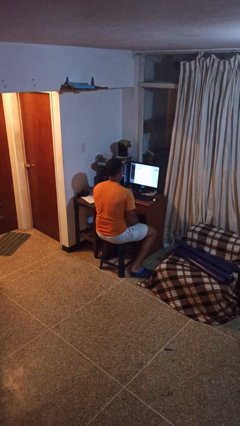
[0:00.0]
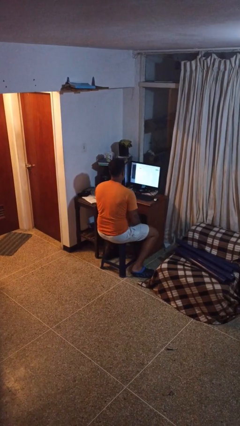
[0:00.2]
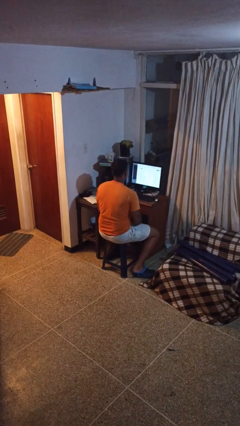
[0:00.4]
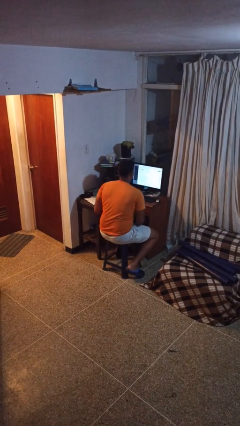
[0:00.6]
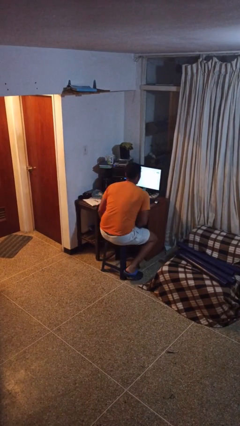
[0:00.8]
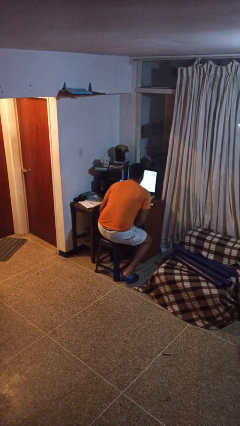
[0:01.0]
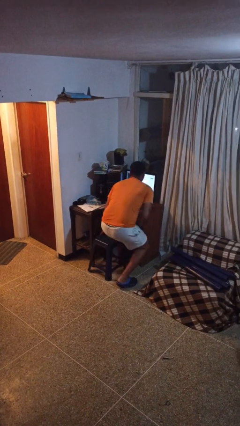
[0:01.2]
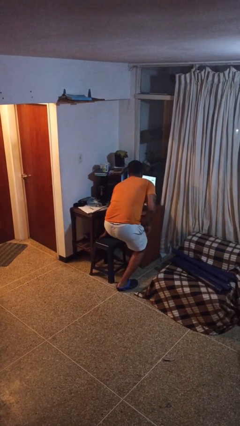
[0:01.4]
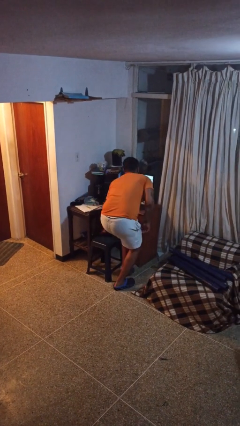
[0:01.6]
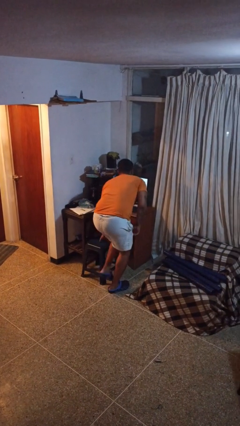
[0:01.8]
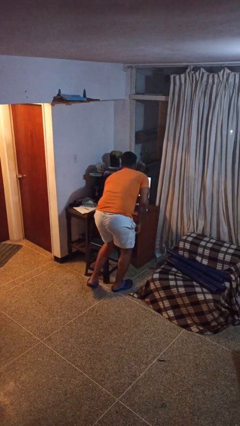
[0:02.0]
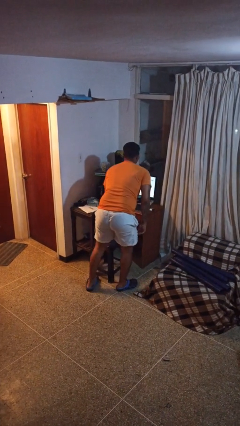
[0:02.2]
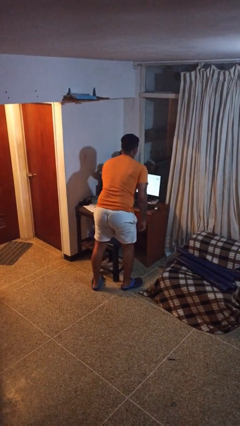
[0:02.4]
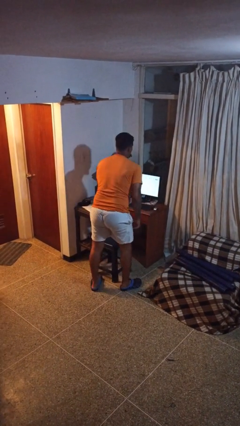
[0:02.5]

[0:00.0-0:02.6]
person stands up

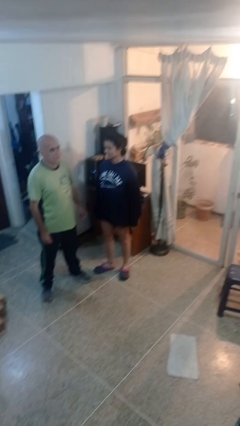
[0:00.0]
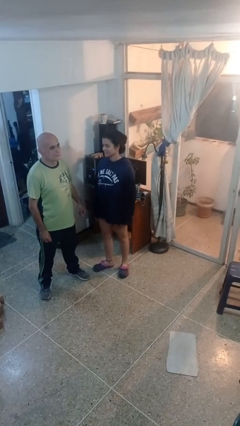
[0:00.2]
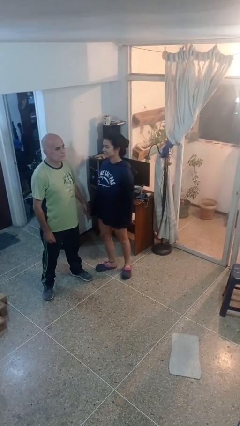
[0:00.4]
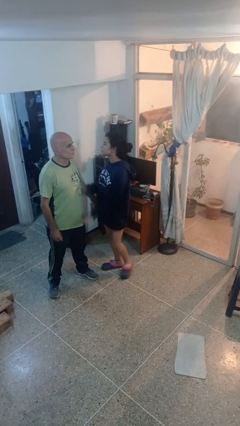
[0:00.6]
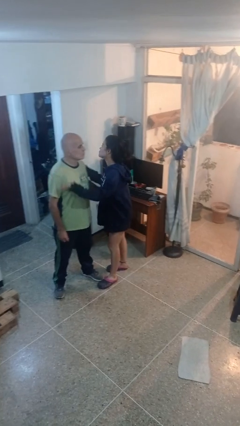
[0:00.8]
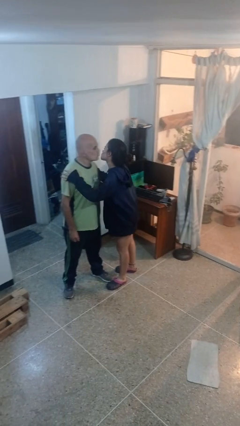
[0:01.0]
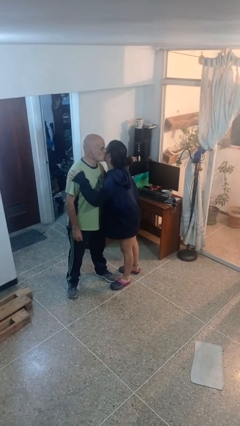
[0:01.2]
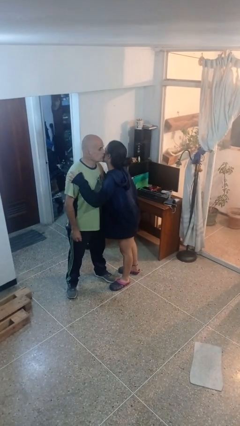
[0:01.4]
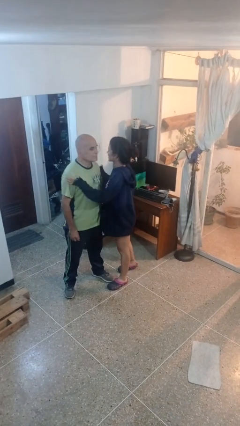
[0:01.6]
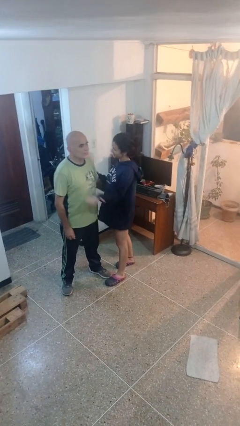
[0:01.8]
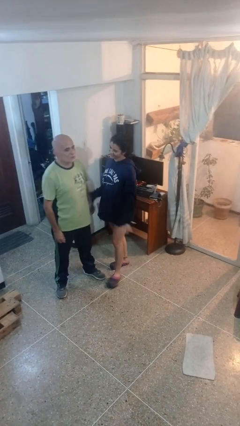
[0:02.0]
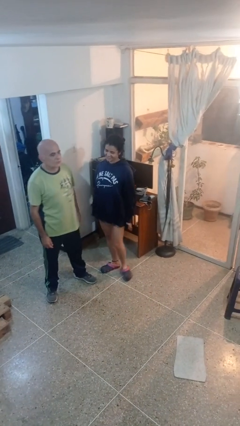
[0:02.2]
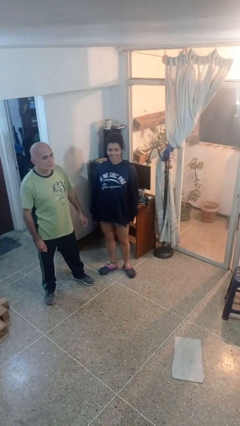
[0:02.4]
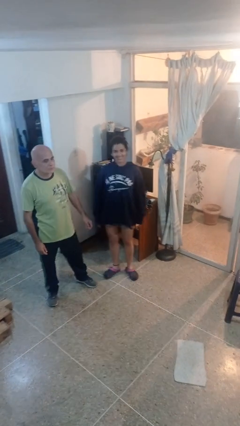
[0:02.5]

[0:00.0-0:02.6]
person kisses cheek of person

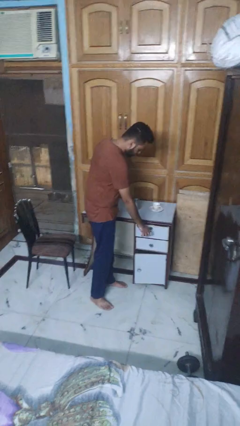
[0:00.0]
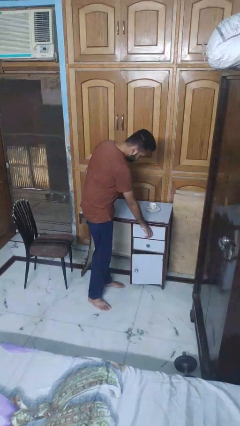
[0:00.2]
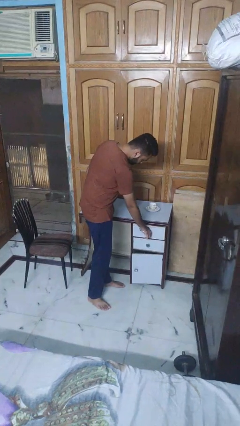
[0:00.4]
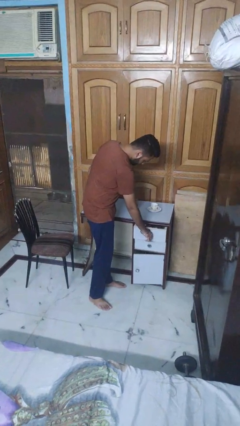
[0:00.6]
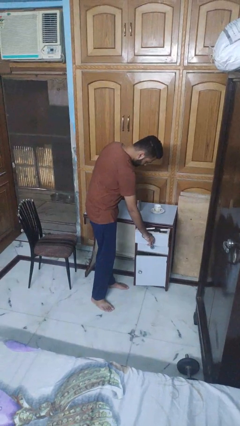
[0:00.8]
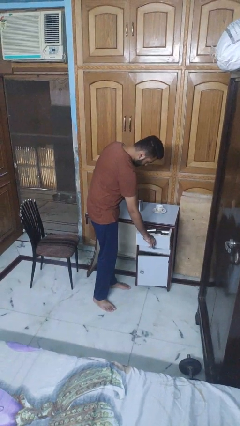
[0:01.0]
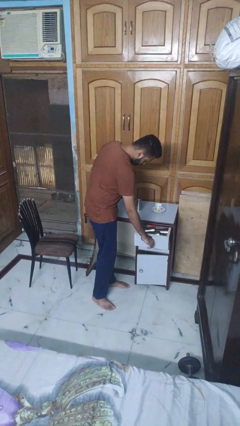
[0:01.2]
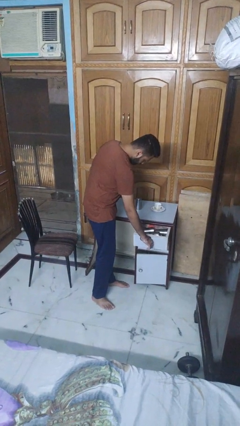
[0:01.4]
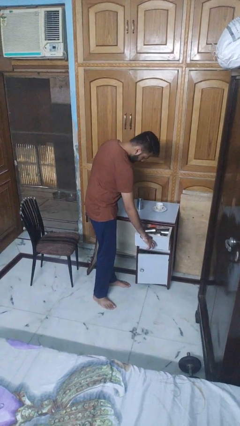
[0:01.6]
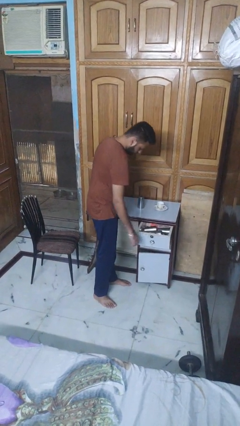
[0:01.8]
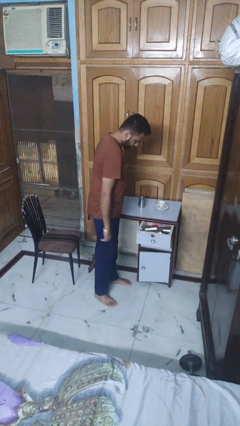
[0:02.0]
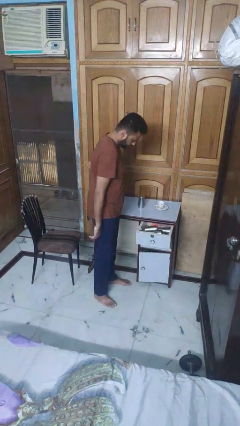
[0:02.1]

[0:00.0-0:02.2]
person opens kitchen drawer

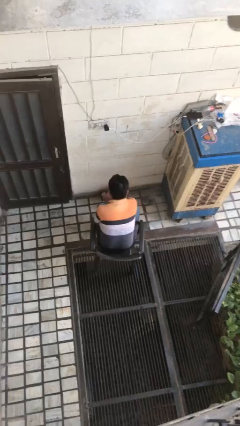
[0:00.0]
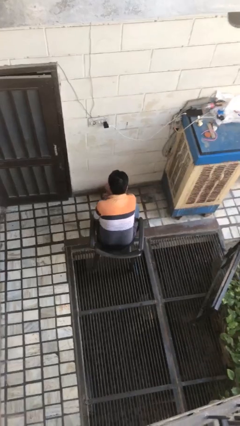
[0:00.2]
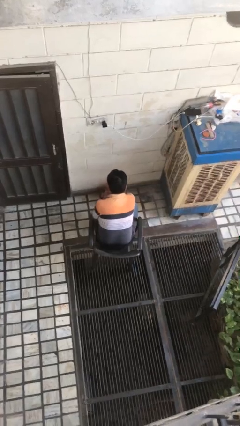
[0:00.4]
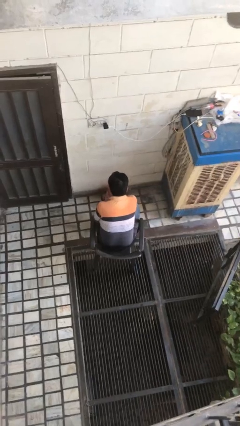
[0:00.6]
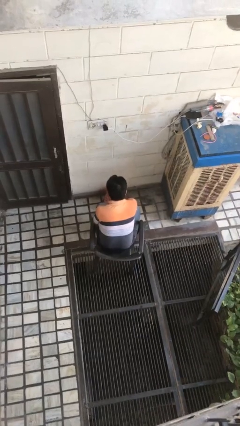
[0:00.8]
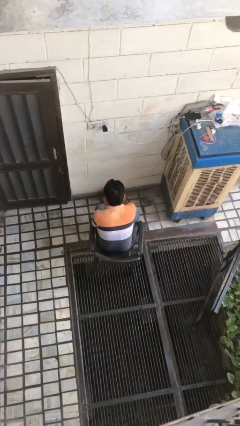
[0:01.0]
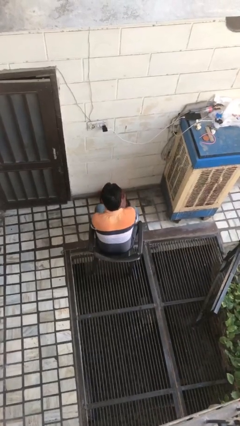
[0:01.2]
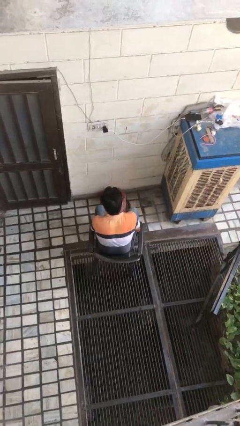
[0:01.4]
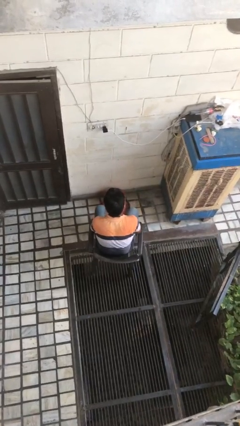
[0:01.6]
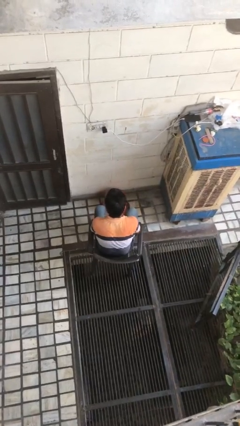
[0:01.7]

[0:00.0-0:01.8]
person waves hand over object

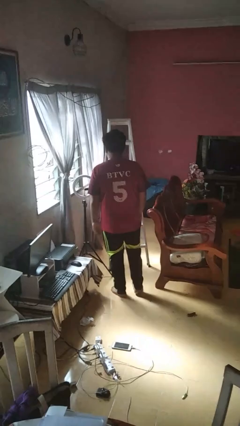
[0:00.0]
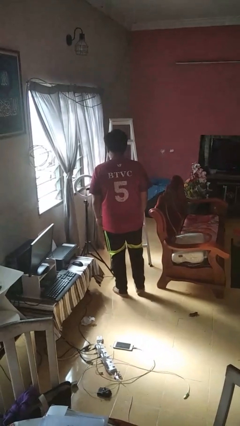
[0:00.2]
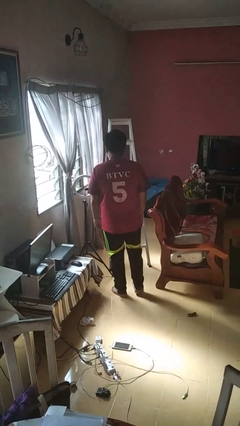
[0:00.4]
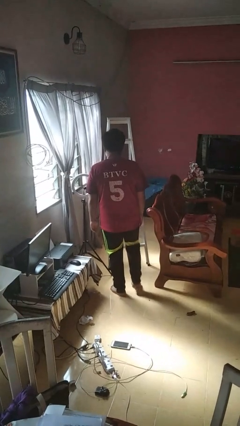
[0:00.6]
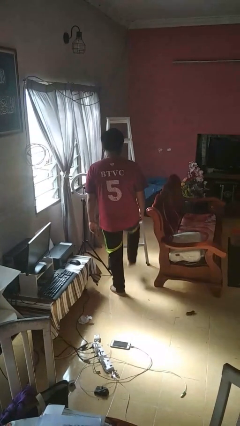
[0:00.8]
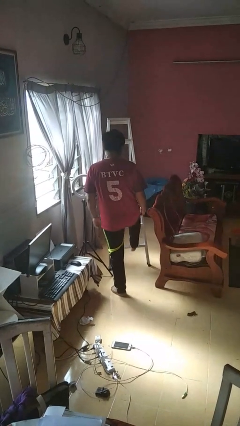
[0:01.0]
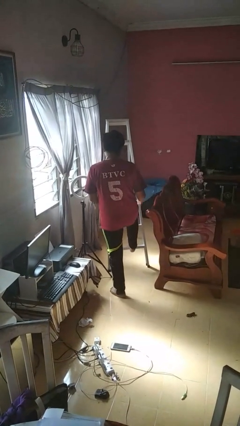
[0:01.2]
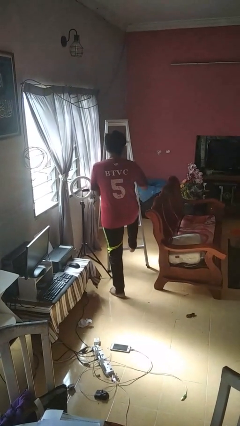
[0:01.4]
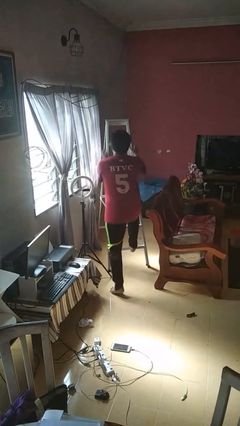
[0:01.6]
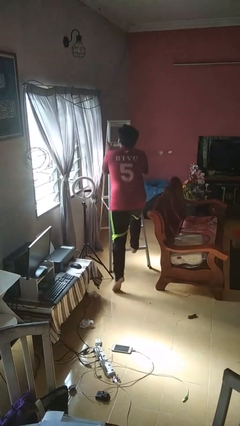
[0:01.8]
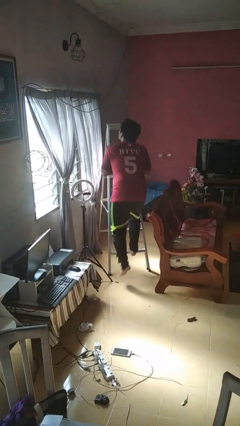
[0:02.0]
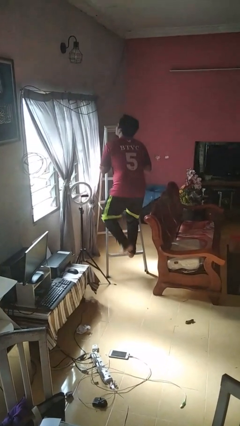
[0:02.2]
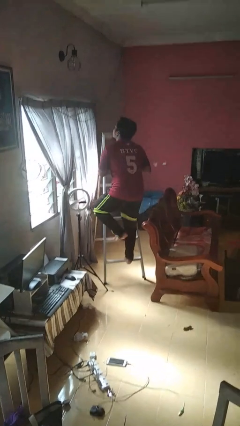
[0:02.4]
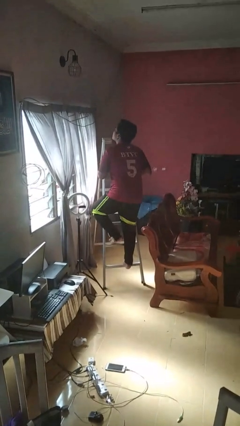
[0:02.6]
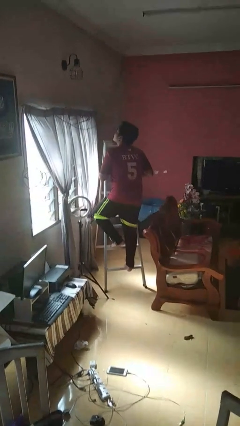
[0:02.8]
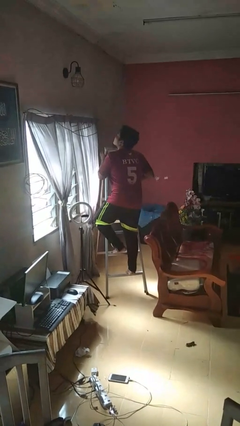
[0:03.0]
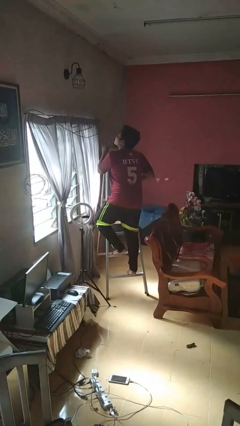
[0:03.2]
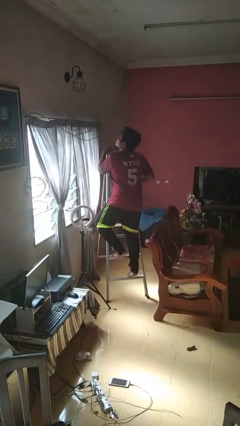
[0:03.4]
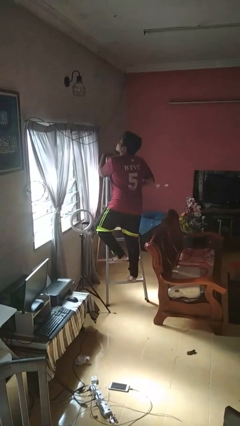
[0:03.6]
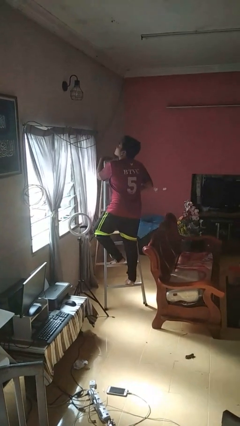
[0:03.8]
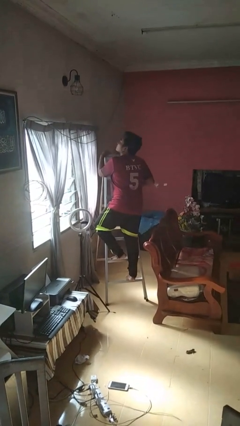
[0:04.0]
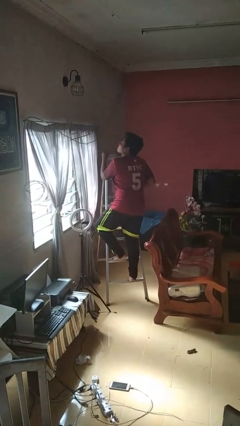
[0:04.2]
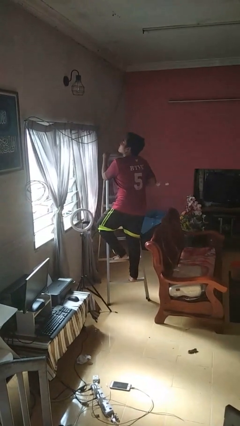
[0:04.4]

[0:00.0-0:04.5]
person climbs up ladder

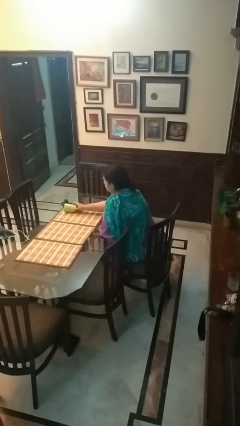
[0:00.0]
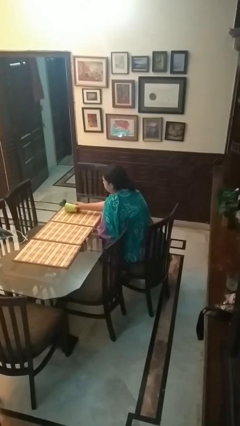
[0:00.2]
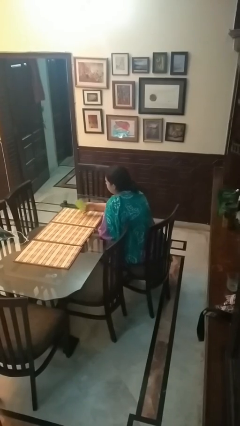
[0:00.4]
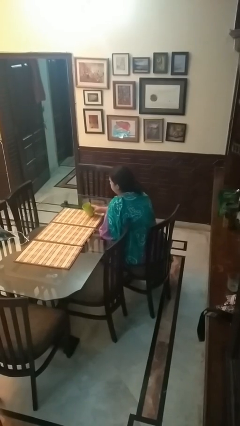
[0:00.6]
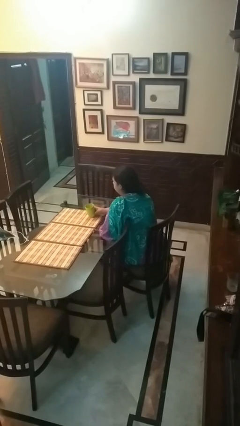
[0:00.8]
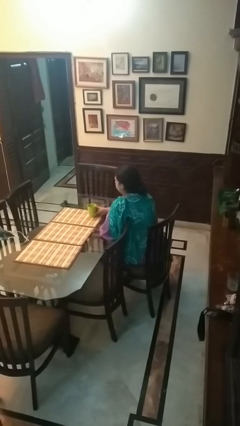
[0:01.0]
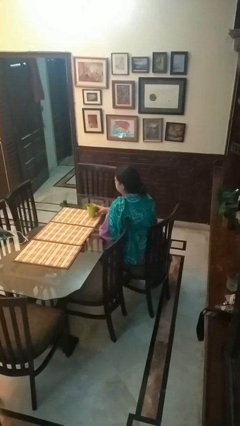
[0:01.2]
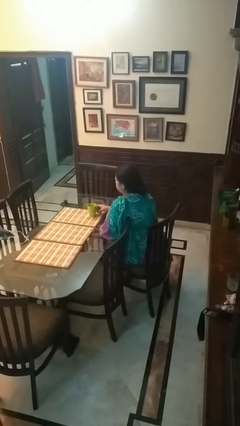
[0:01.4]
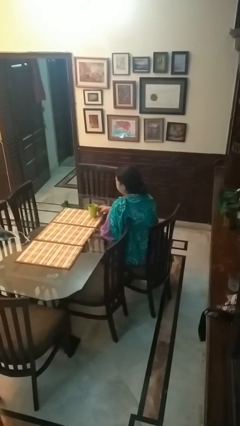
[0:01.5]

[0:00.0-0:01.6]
person sets upright glass

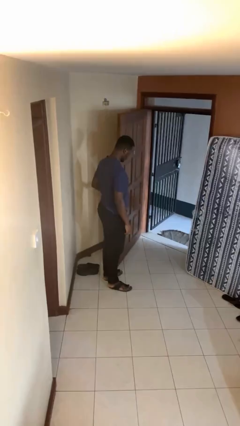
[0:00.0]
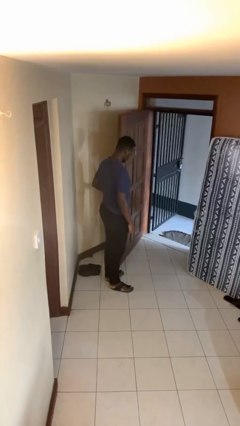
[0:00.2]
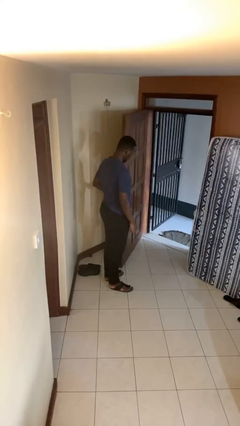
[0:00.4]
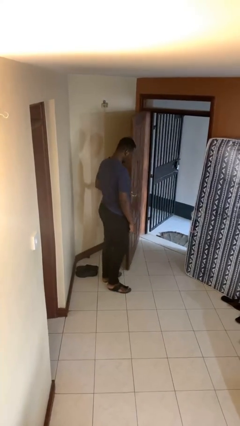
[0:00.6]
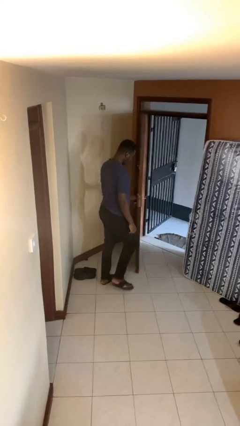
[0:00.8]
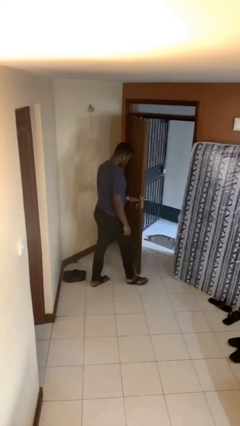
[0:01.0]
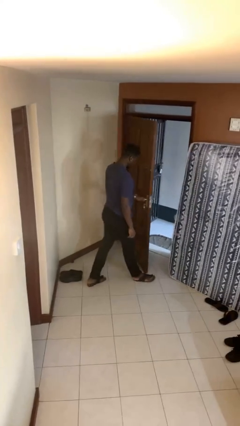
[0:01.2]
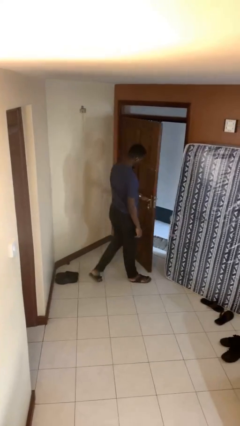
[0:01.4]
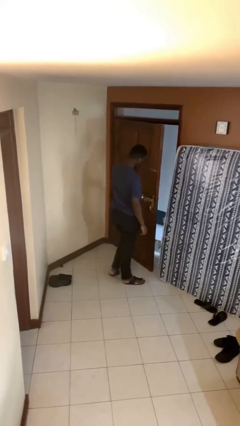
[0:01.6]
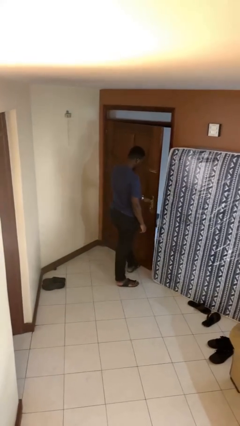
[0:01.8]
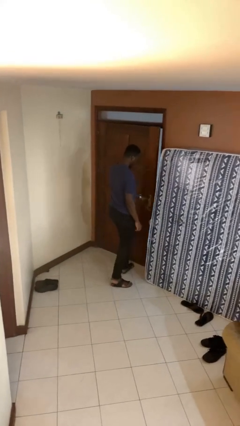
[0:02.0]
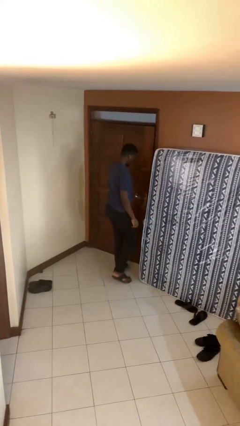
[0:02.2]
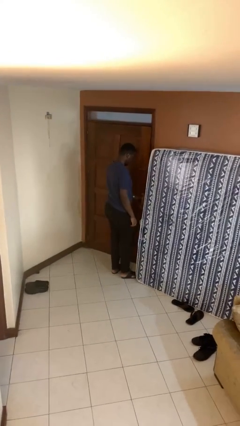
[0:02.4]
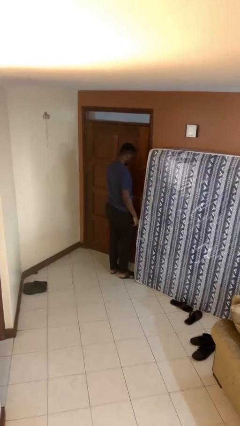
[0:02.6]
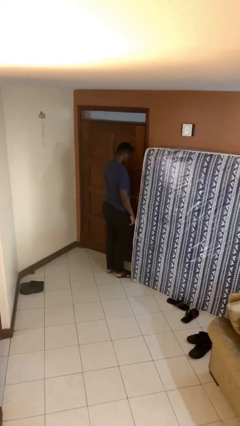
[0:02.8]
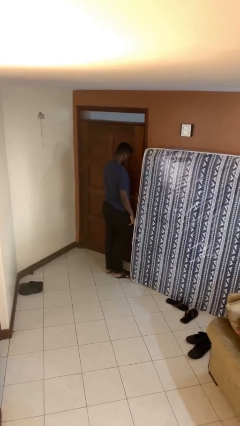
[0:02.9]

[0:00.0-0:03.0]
person closes facility door
